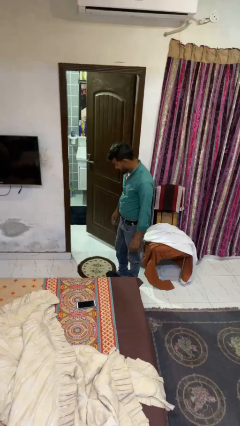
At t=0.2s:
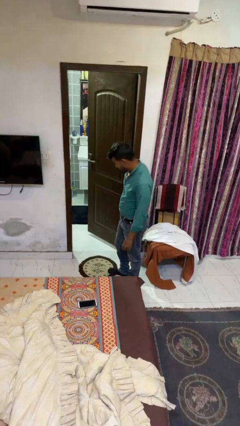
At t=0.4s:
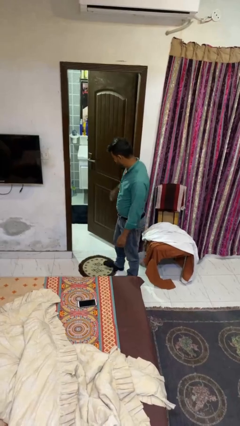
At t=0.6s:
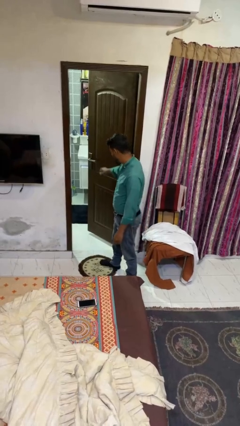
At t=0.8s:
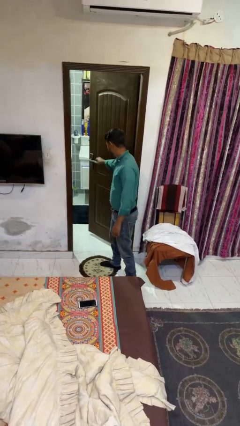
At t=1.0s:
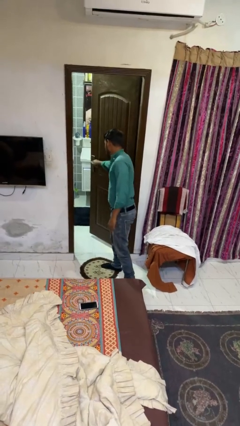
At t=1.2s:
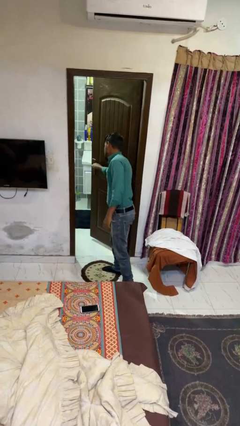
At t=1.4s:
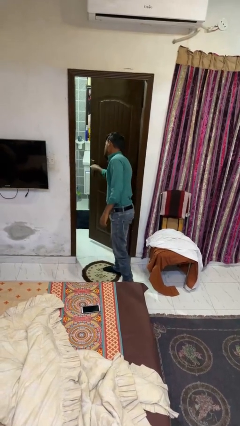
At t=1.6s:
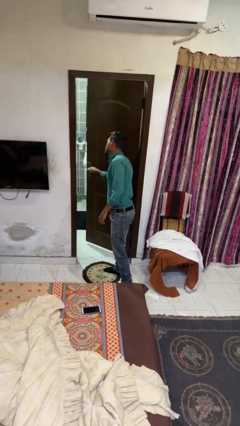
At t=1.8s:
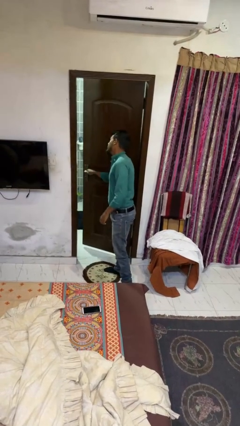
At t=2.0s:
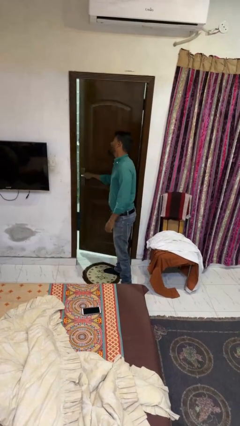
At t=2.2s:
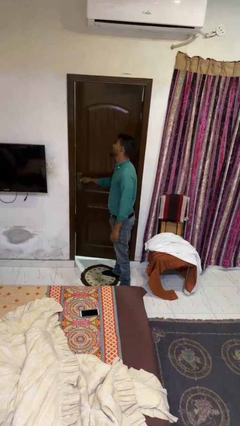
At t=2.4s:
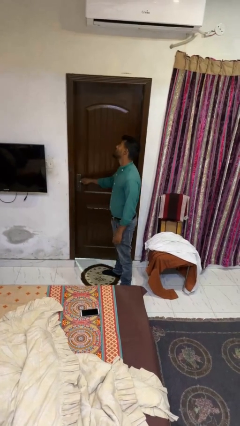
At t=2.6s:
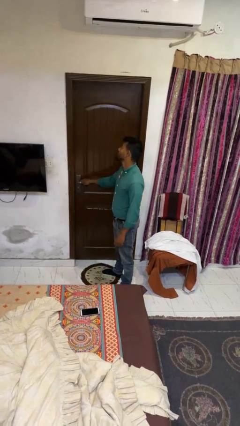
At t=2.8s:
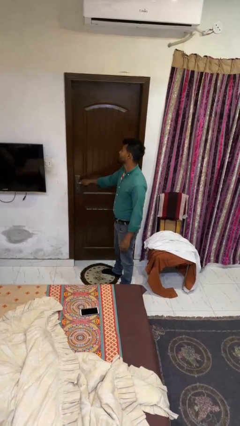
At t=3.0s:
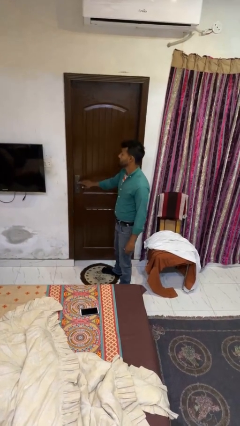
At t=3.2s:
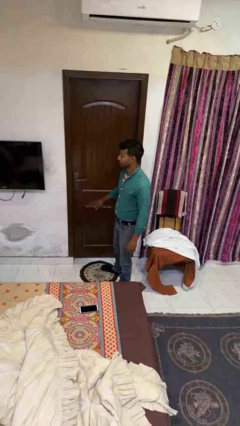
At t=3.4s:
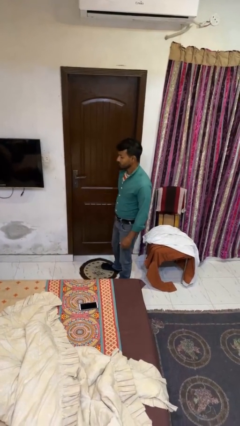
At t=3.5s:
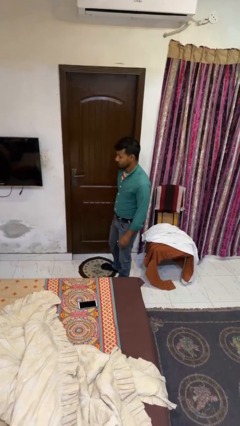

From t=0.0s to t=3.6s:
person closes facility door

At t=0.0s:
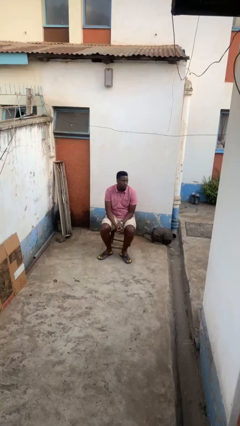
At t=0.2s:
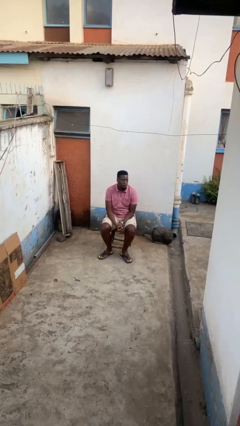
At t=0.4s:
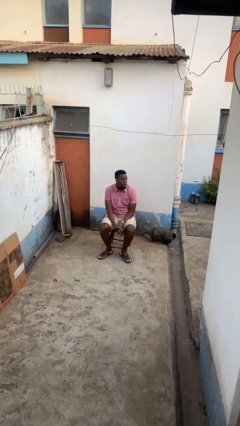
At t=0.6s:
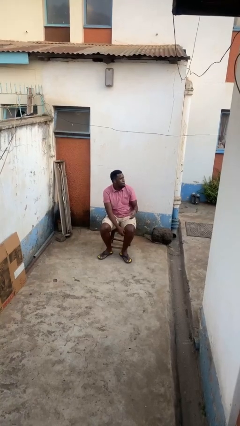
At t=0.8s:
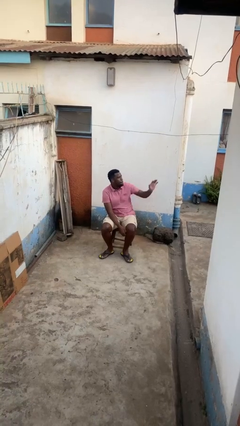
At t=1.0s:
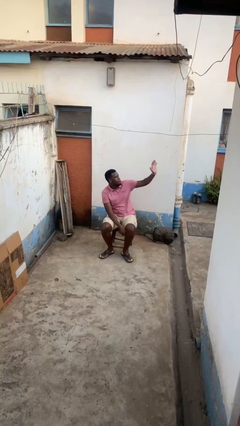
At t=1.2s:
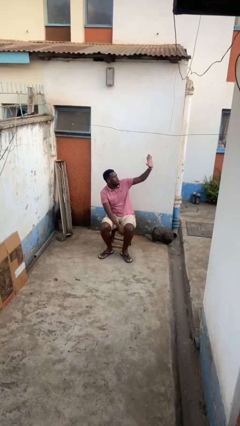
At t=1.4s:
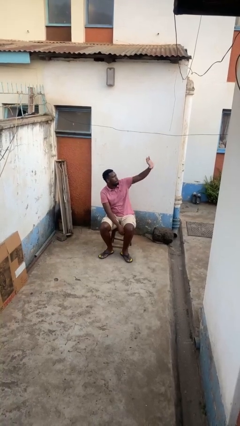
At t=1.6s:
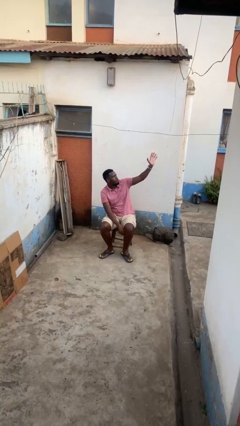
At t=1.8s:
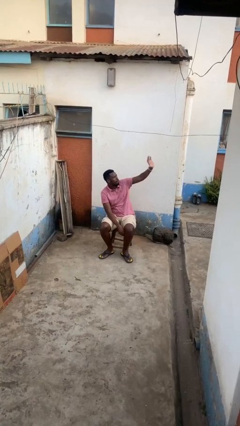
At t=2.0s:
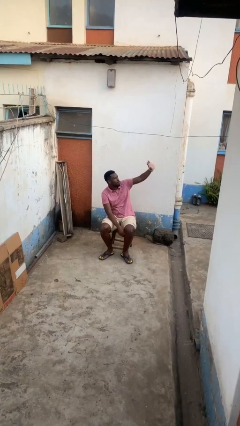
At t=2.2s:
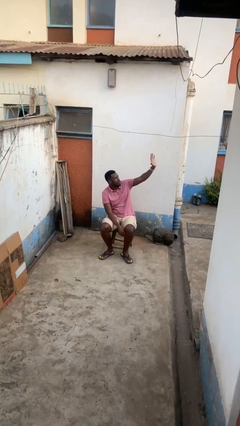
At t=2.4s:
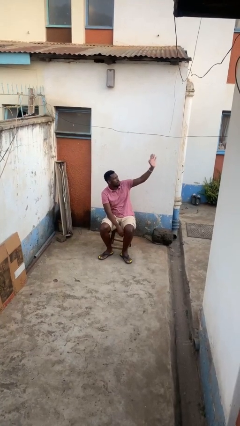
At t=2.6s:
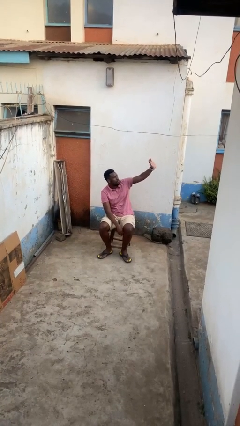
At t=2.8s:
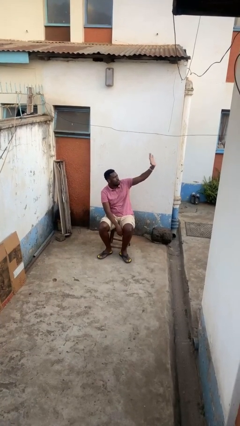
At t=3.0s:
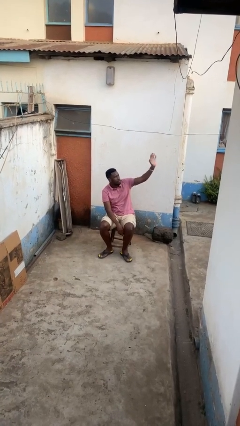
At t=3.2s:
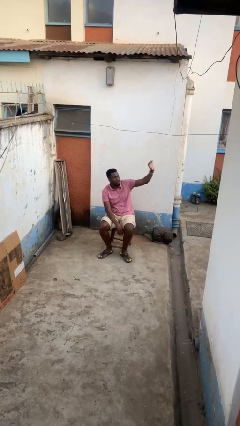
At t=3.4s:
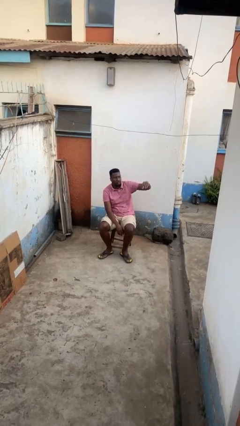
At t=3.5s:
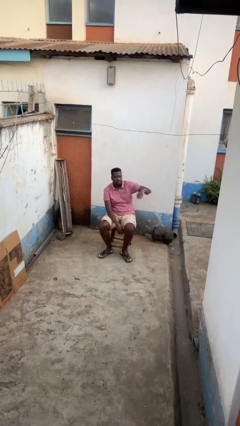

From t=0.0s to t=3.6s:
person waves at person

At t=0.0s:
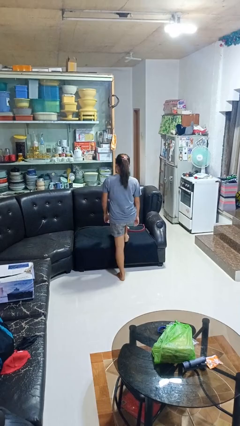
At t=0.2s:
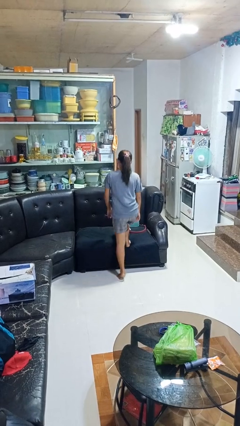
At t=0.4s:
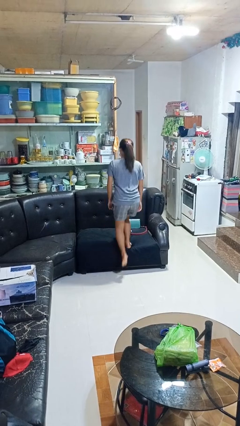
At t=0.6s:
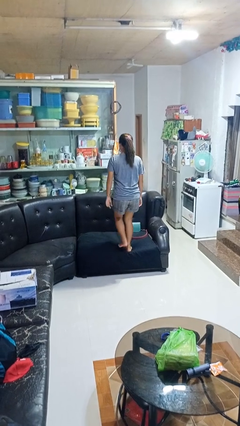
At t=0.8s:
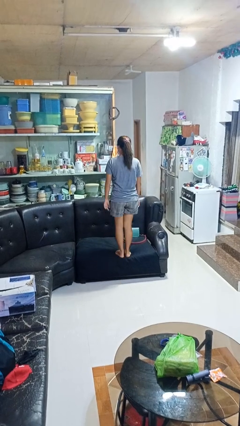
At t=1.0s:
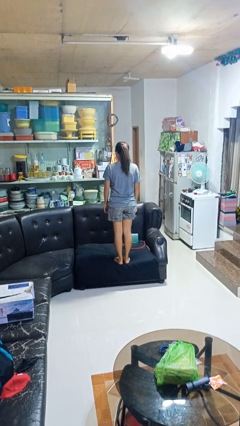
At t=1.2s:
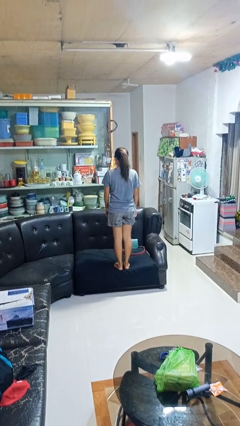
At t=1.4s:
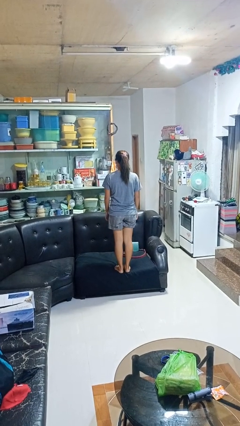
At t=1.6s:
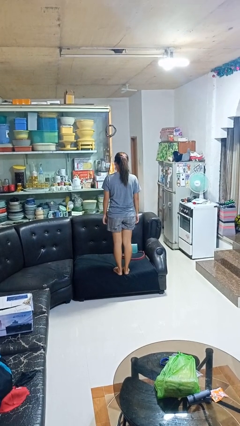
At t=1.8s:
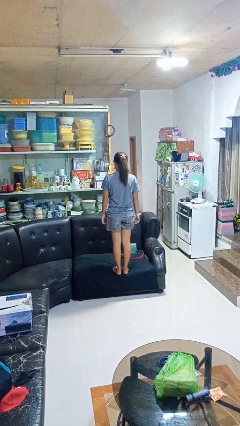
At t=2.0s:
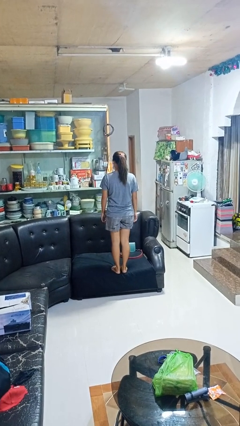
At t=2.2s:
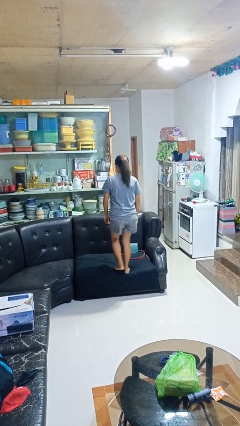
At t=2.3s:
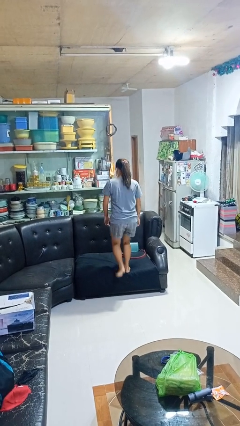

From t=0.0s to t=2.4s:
person climbs on couch

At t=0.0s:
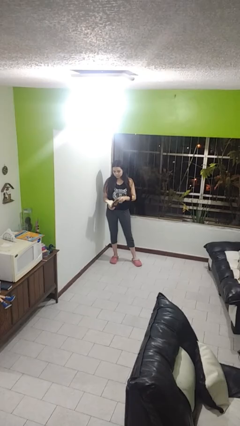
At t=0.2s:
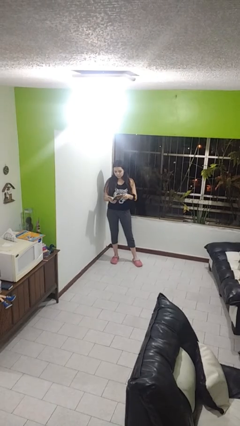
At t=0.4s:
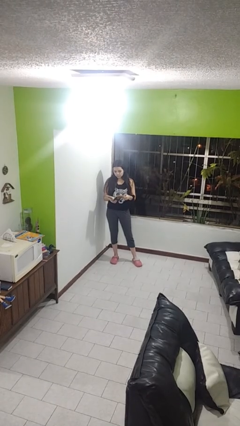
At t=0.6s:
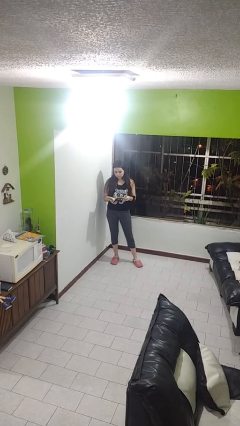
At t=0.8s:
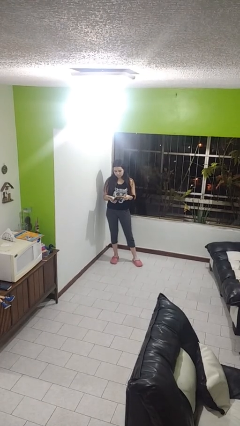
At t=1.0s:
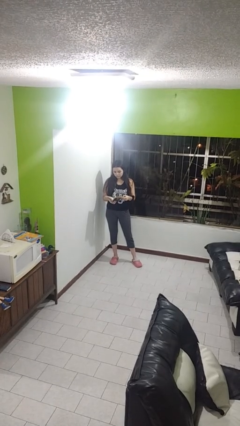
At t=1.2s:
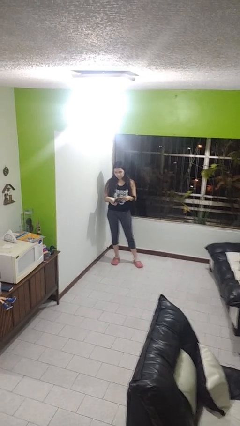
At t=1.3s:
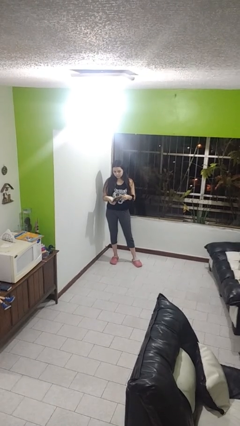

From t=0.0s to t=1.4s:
person reads book

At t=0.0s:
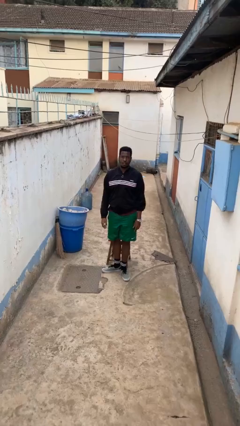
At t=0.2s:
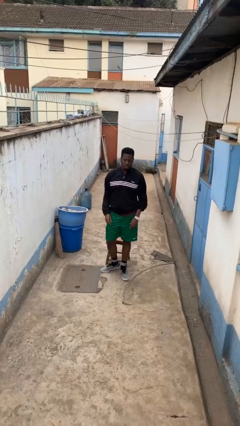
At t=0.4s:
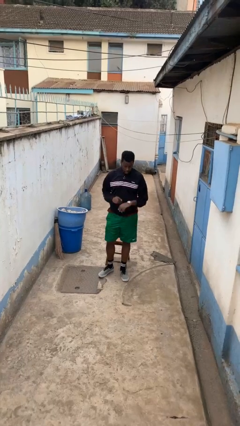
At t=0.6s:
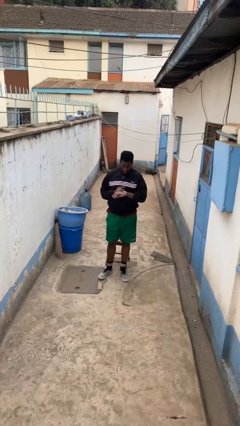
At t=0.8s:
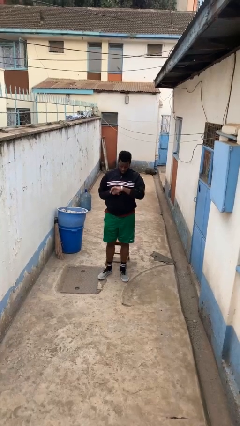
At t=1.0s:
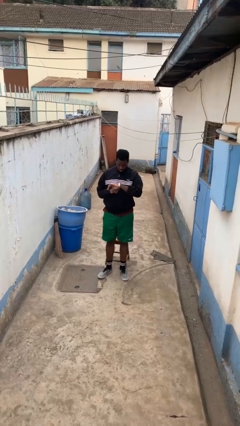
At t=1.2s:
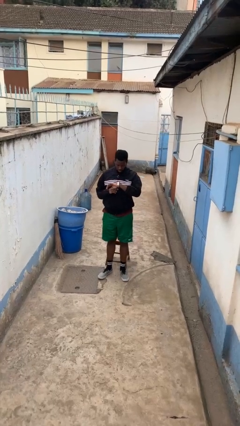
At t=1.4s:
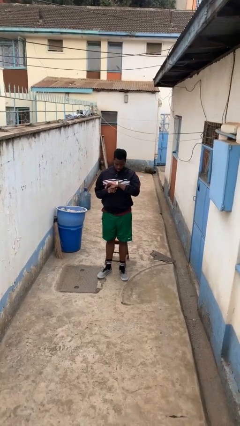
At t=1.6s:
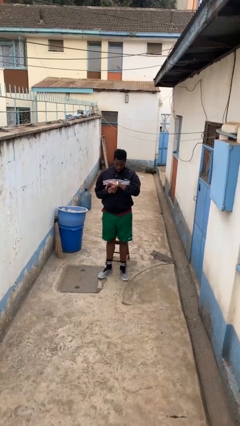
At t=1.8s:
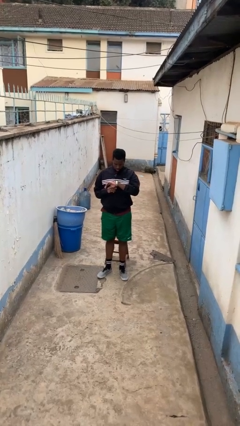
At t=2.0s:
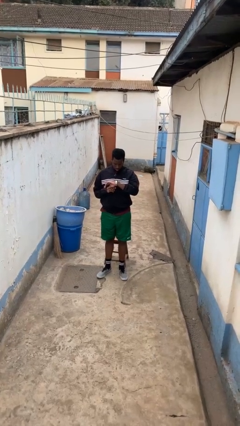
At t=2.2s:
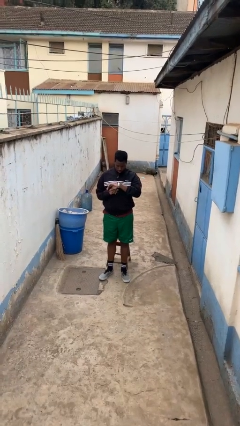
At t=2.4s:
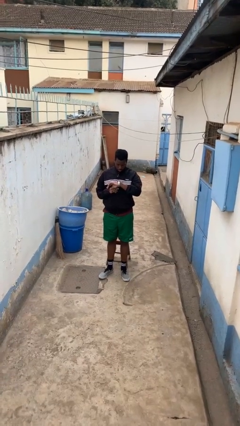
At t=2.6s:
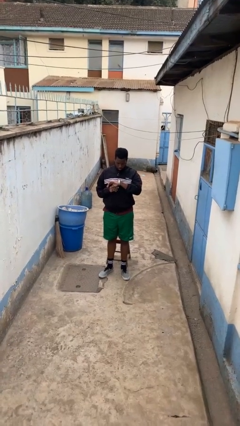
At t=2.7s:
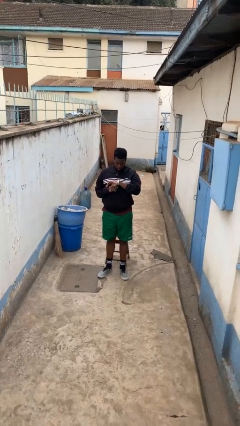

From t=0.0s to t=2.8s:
person looks at wristwatch

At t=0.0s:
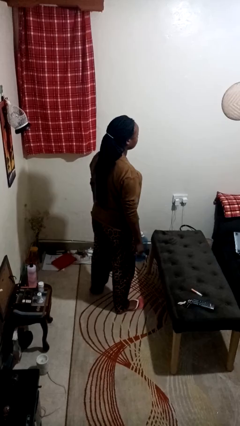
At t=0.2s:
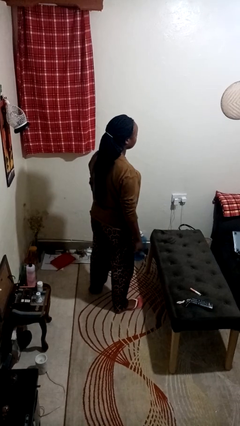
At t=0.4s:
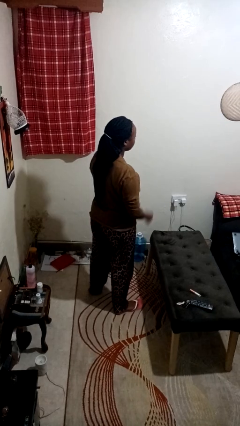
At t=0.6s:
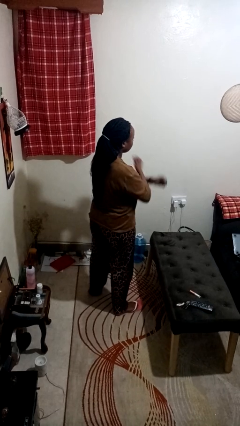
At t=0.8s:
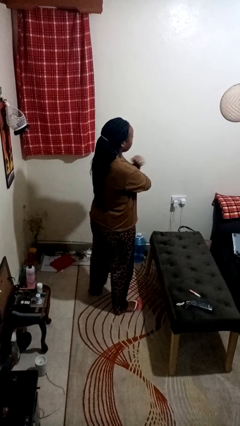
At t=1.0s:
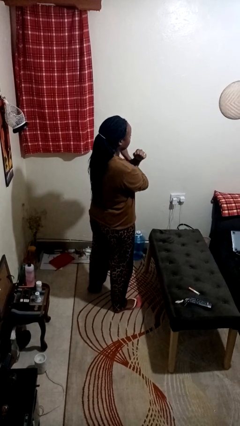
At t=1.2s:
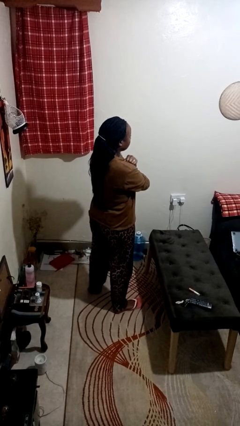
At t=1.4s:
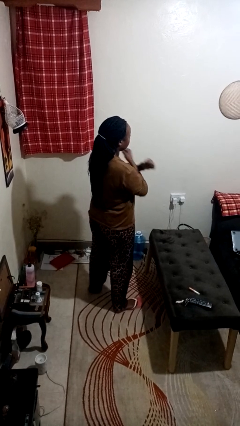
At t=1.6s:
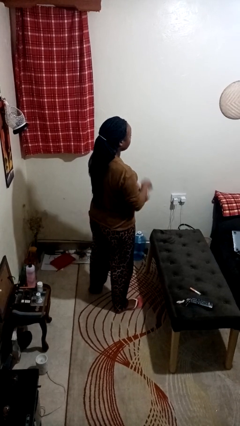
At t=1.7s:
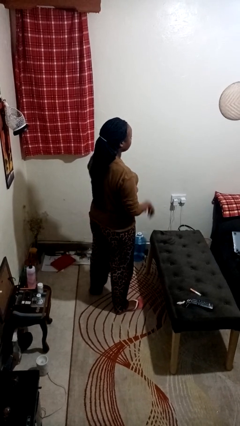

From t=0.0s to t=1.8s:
person gestures arms x

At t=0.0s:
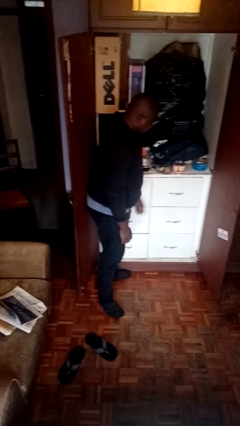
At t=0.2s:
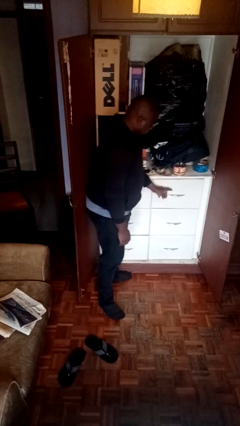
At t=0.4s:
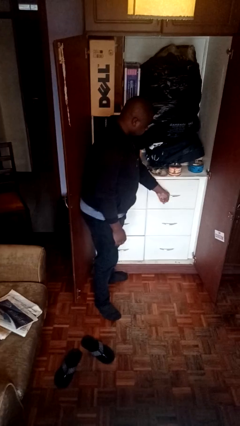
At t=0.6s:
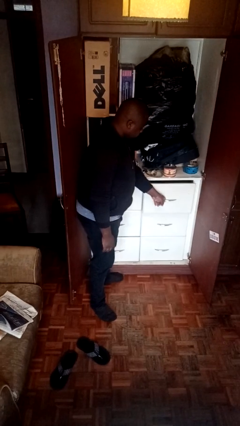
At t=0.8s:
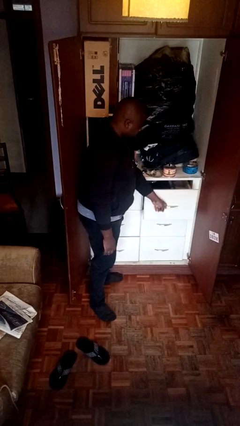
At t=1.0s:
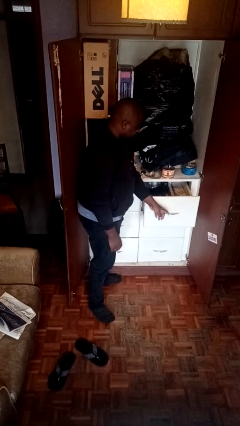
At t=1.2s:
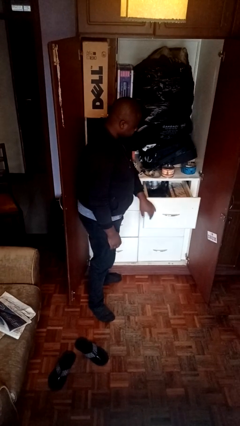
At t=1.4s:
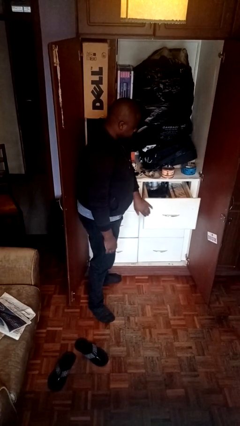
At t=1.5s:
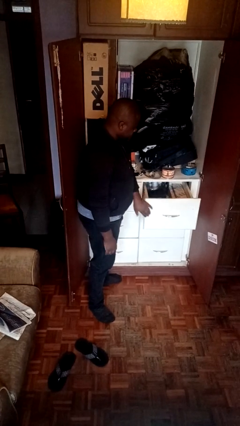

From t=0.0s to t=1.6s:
person opens dresser drawer
